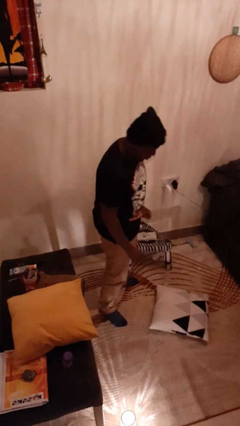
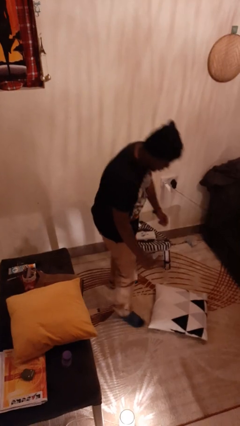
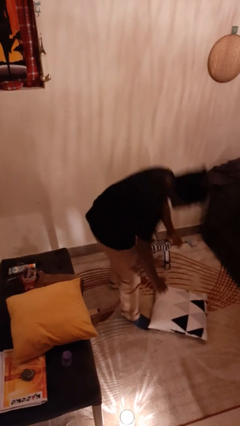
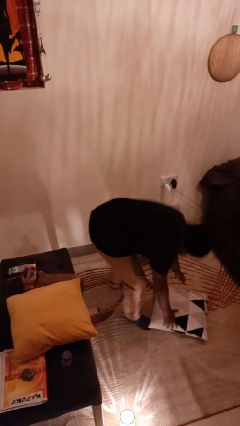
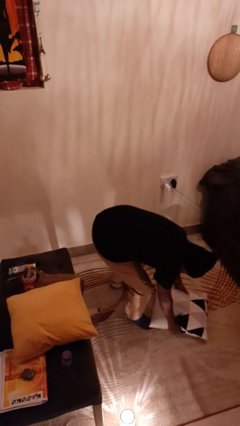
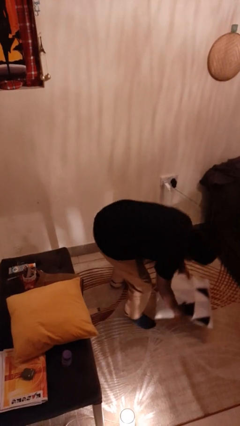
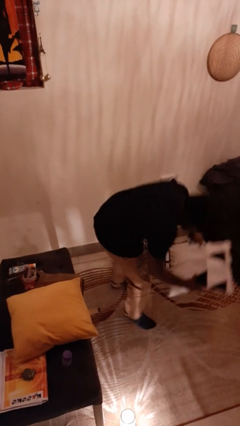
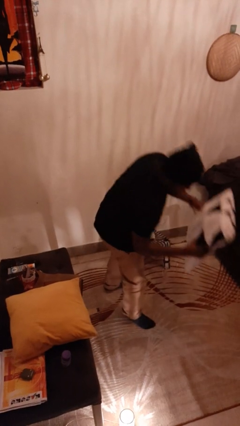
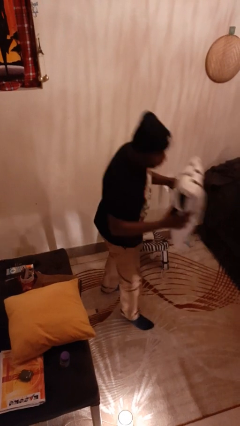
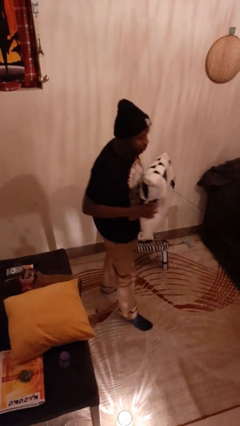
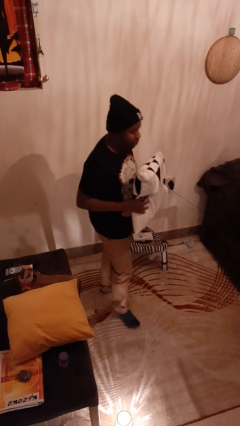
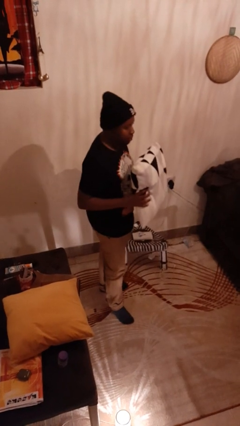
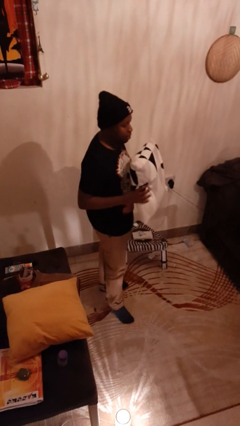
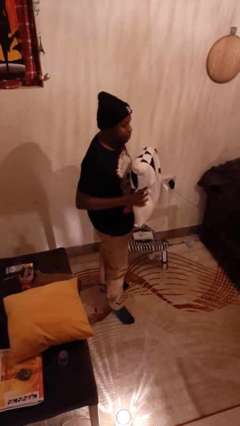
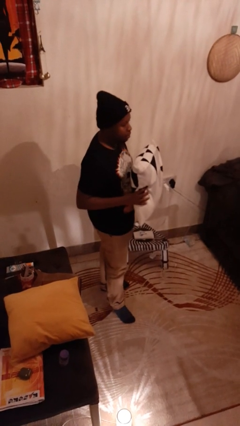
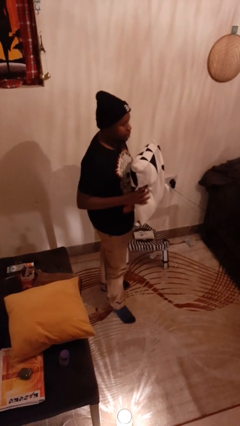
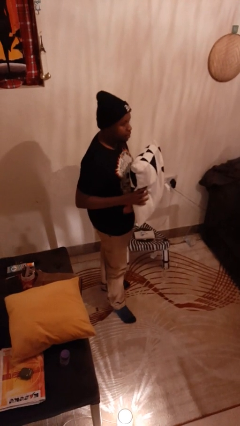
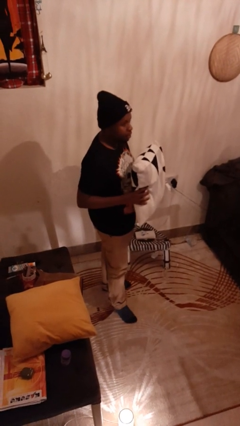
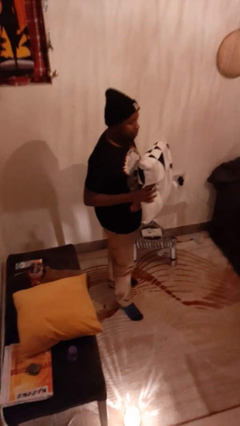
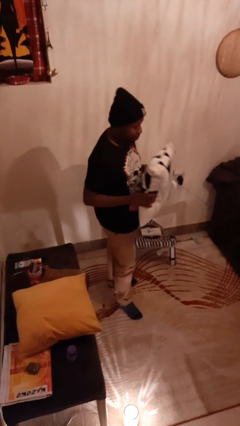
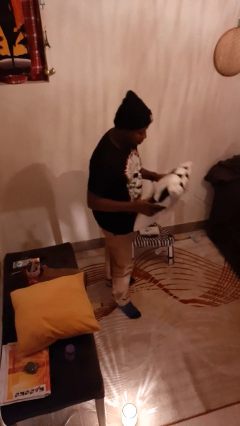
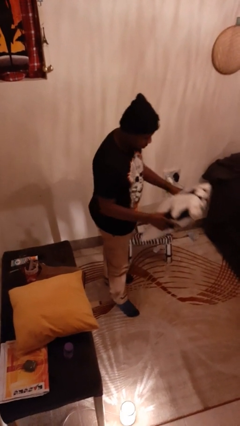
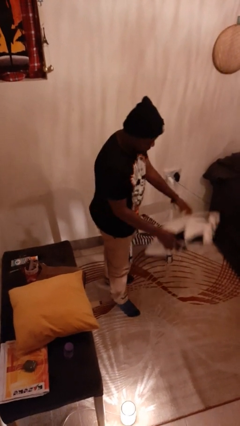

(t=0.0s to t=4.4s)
person picks up object from floor

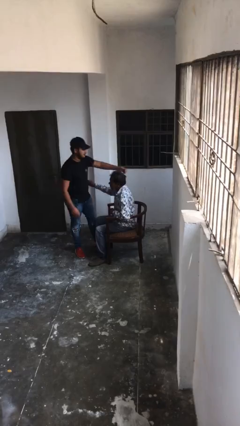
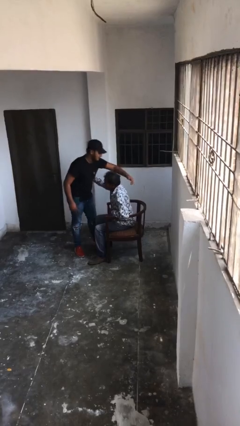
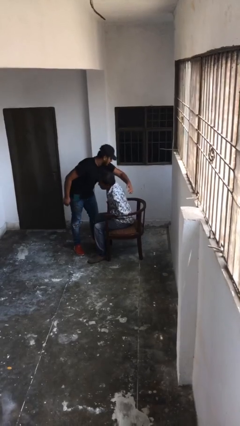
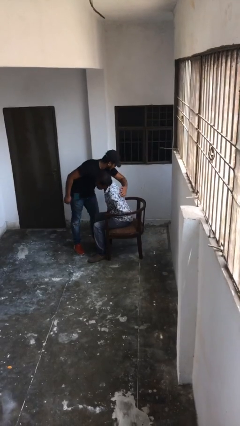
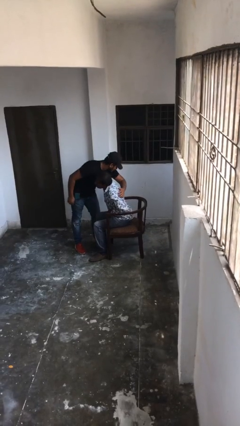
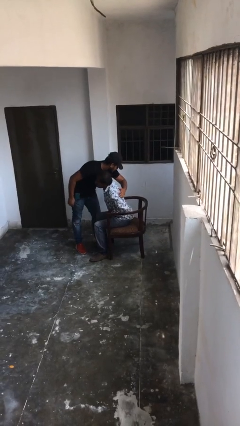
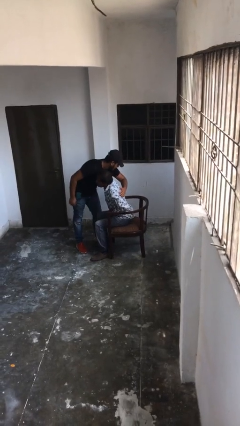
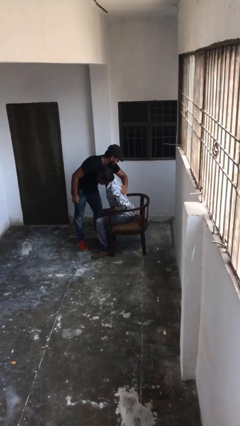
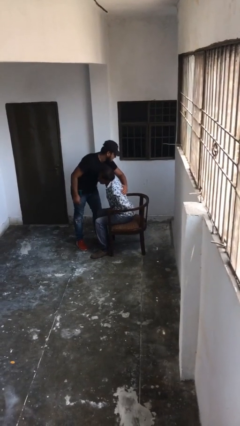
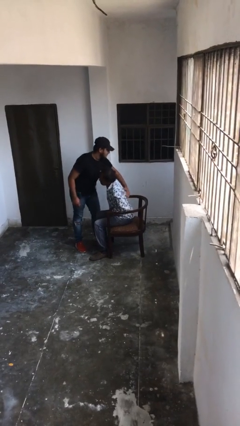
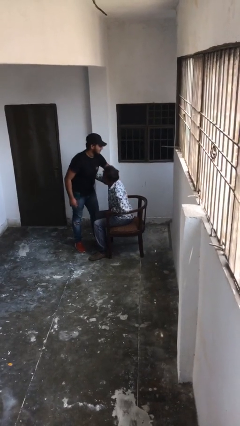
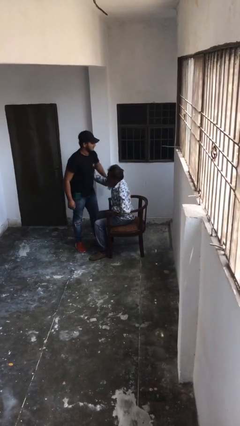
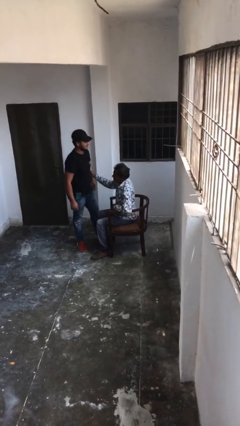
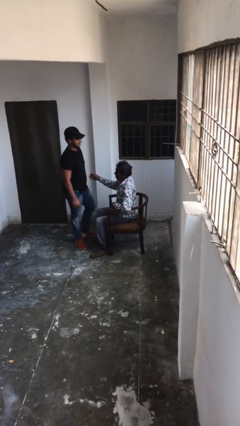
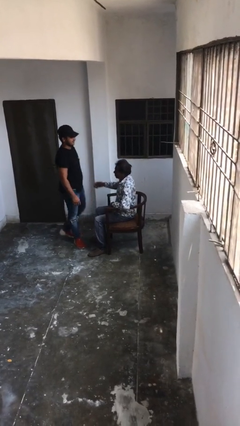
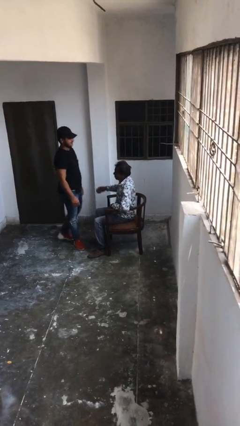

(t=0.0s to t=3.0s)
person embraces person

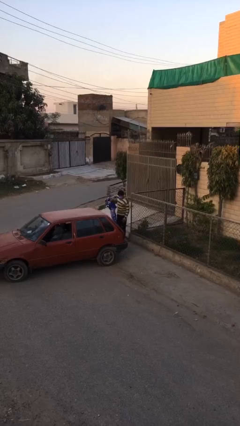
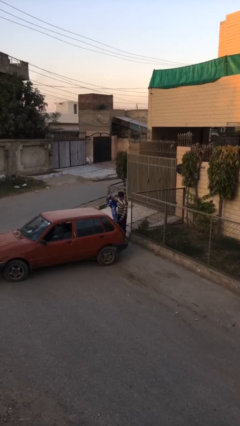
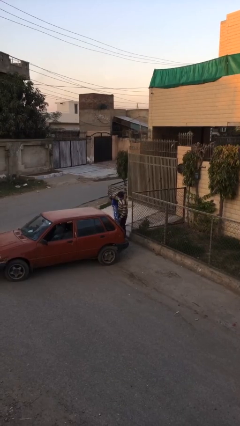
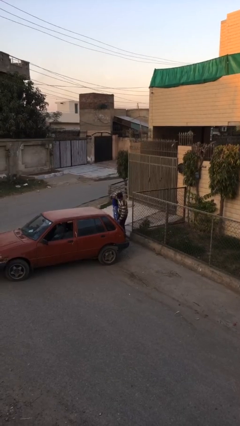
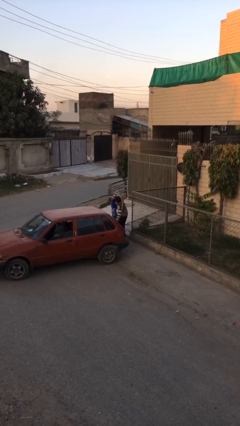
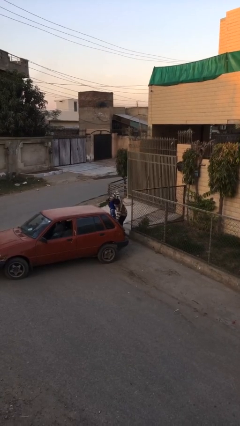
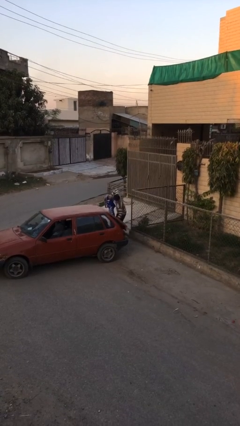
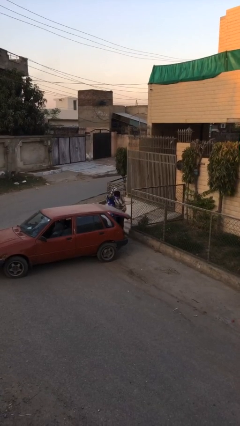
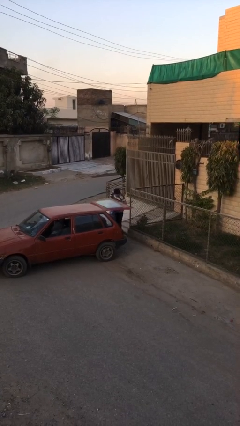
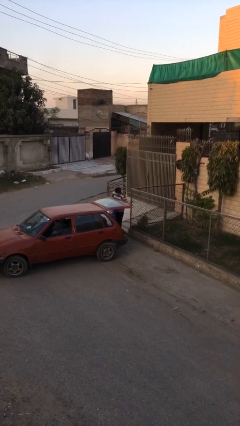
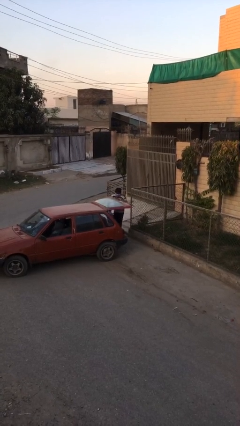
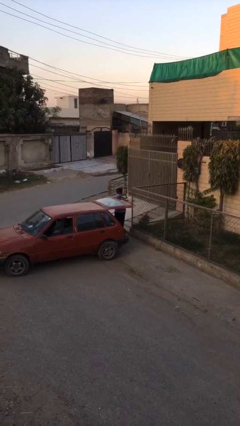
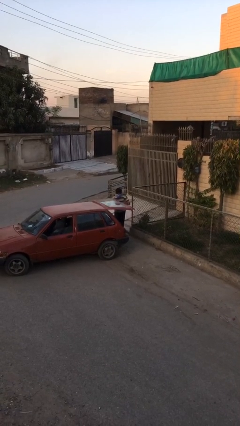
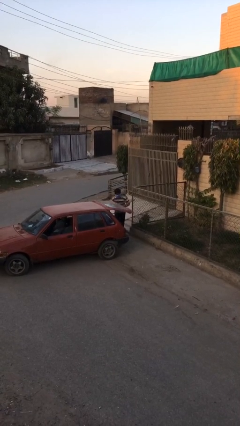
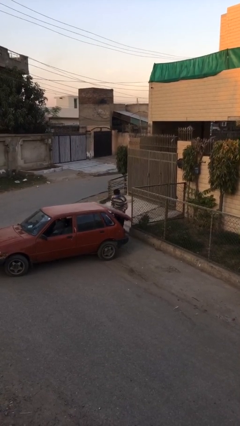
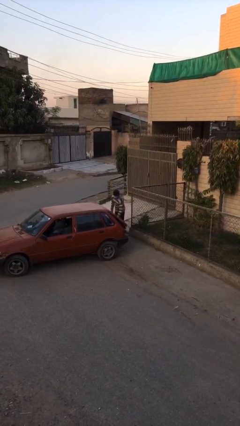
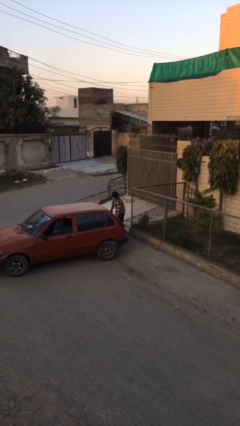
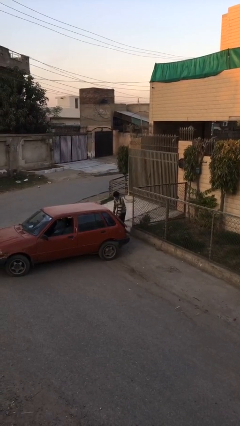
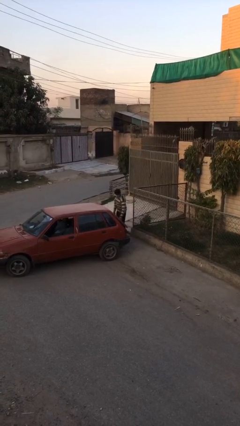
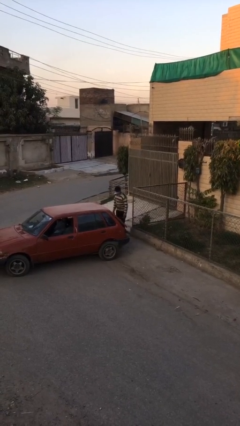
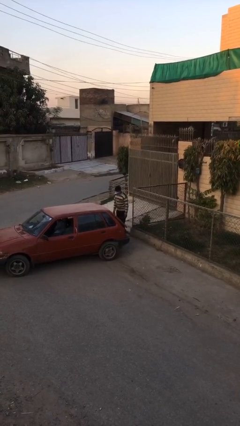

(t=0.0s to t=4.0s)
person loads car

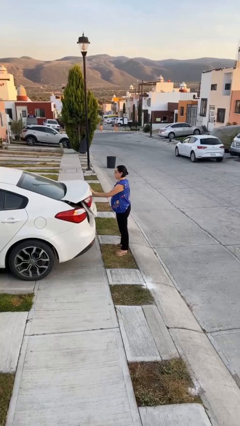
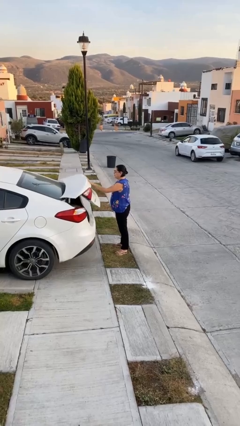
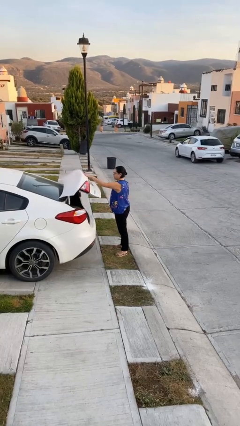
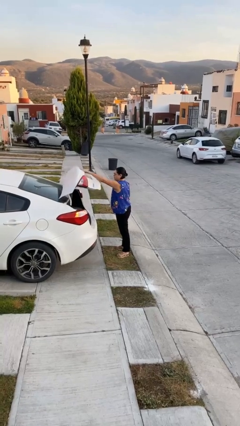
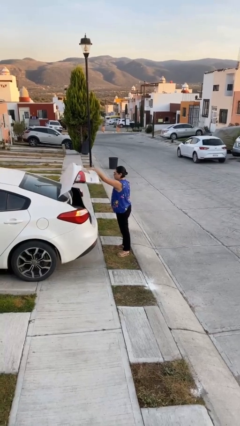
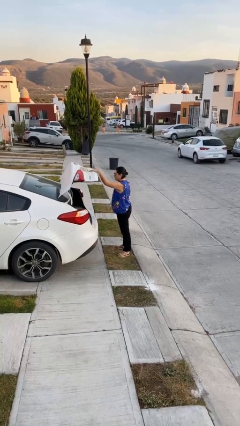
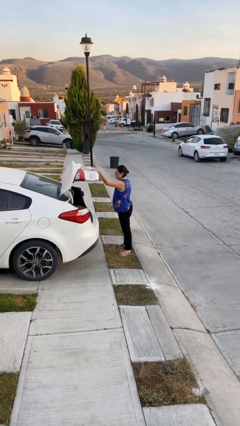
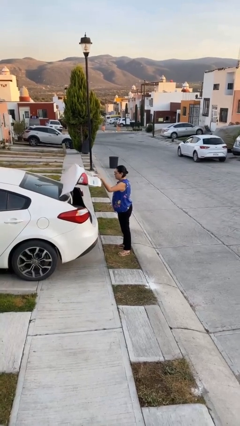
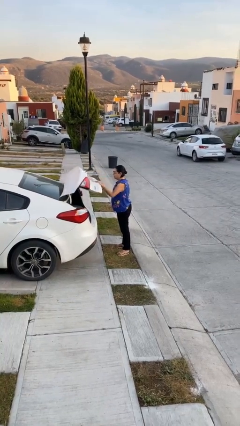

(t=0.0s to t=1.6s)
person opens car trunk

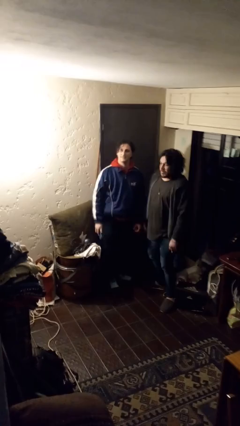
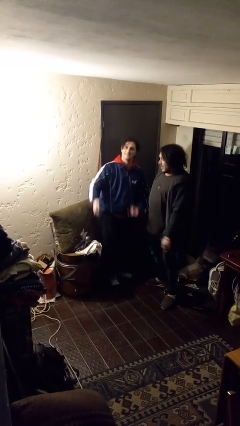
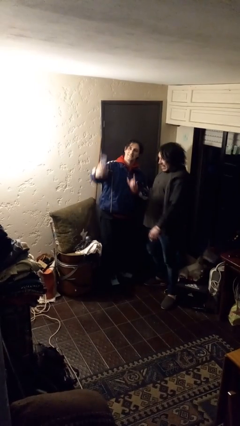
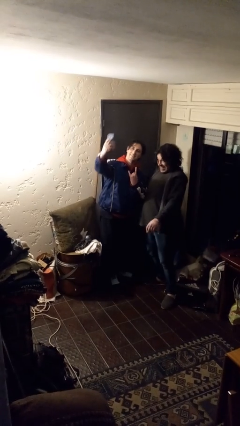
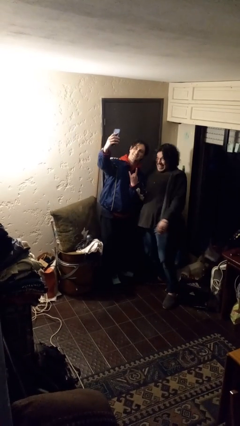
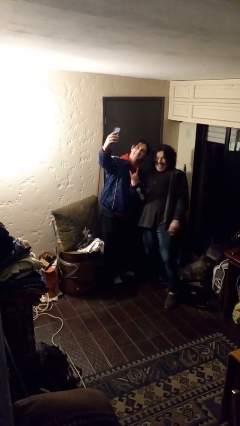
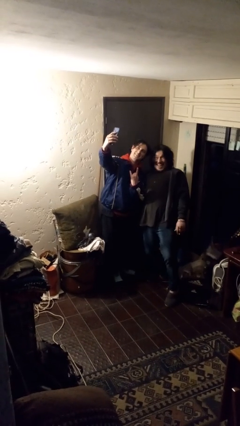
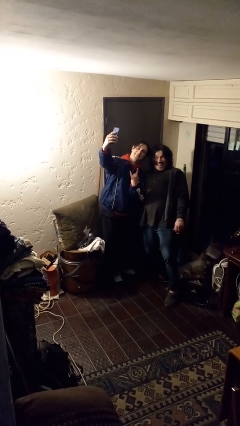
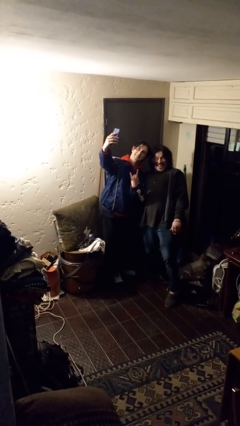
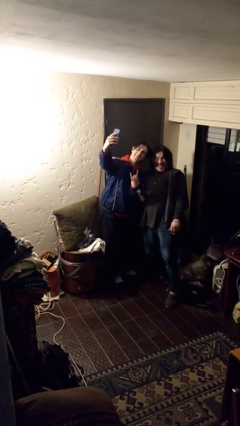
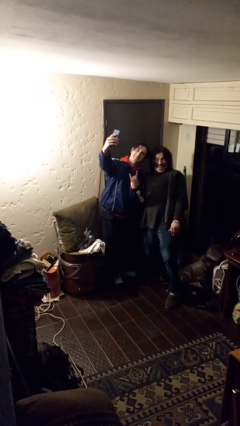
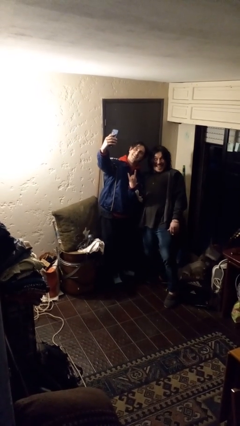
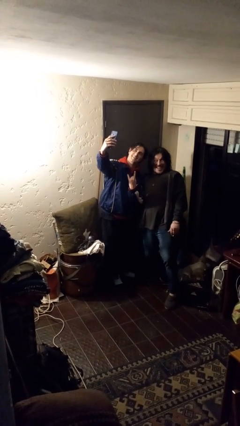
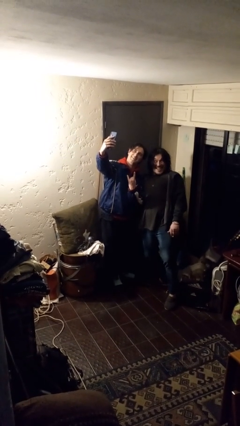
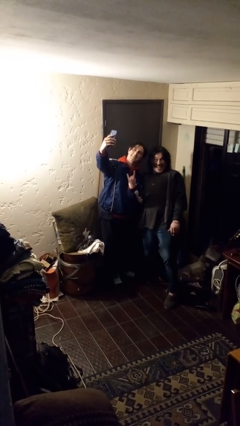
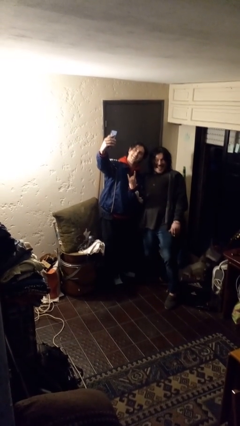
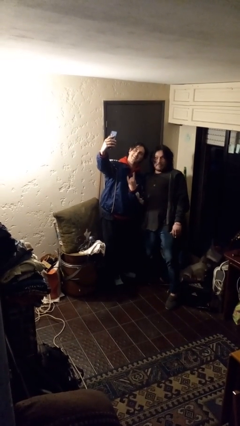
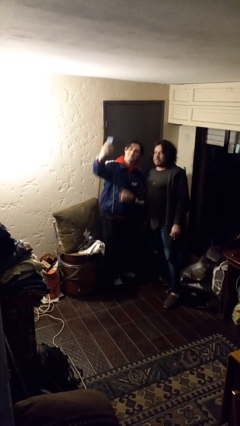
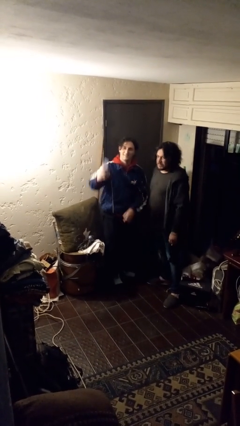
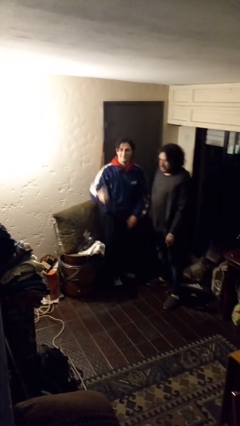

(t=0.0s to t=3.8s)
person takes selfie with person

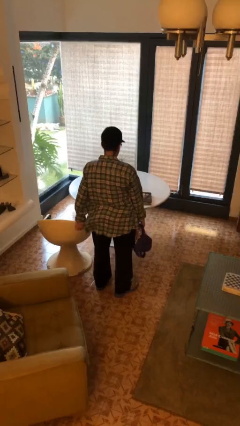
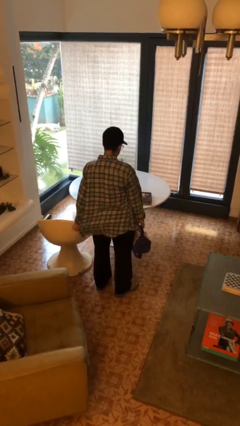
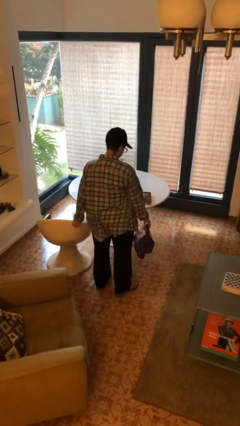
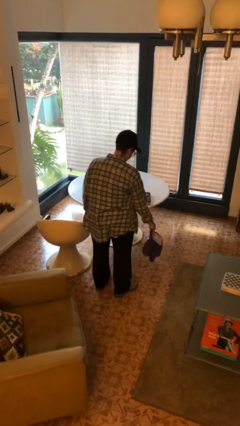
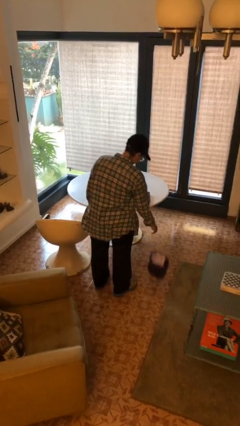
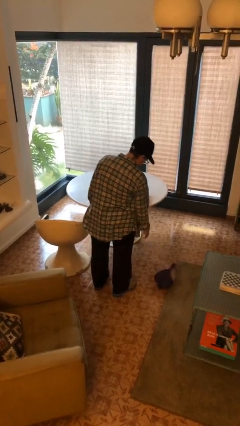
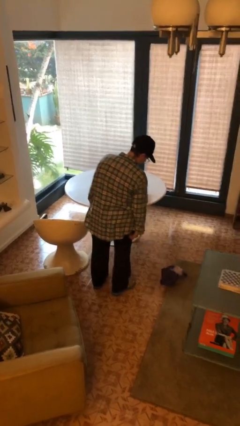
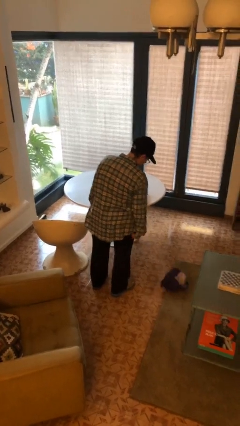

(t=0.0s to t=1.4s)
person drops object
